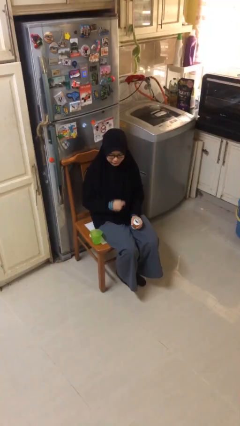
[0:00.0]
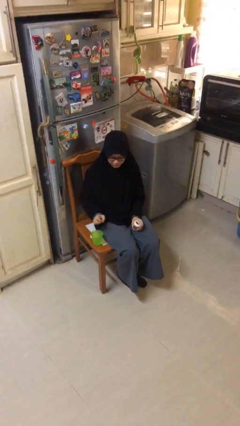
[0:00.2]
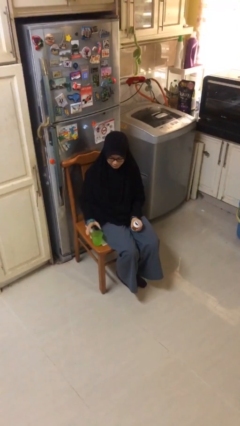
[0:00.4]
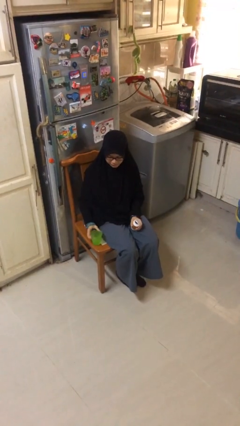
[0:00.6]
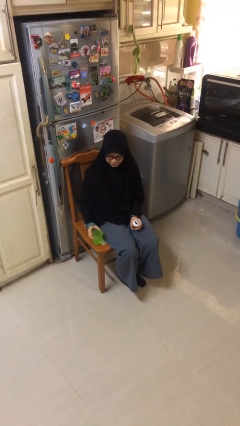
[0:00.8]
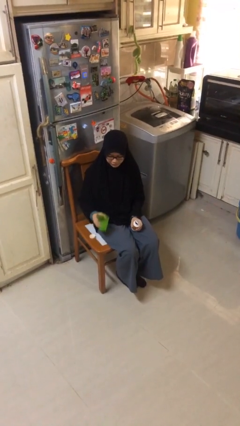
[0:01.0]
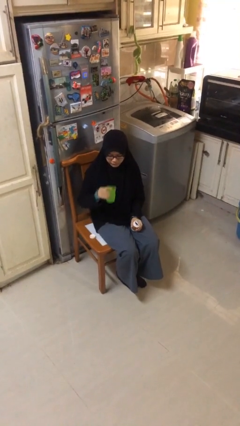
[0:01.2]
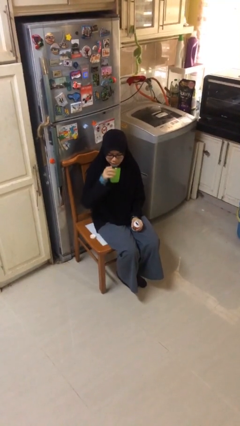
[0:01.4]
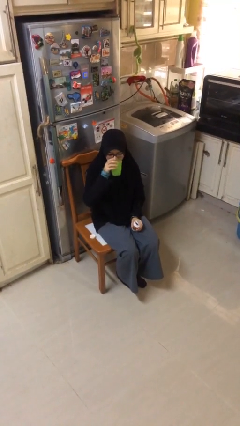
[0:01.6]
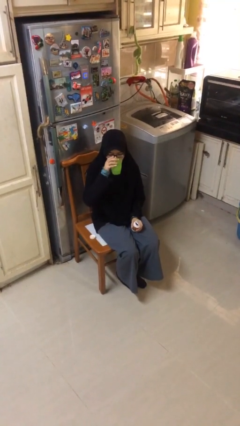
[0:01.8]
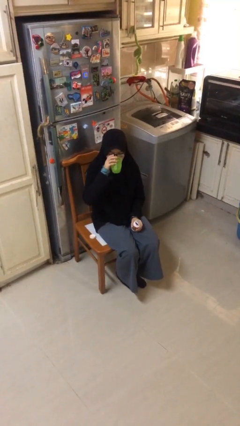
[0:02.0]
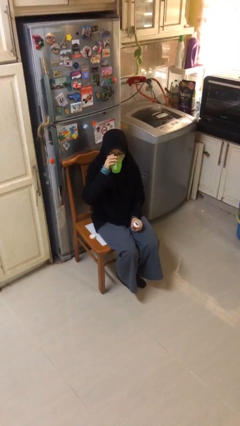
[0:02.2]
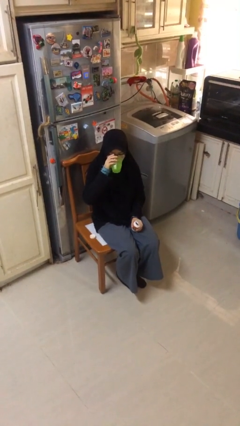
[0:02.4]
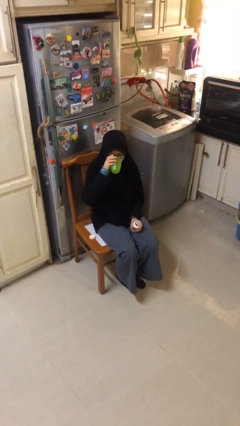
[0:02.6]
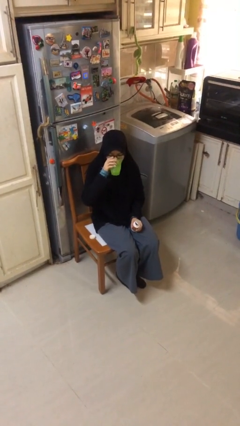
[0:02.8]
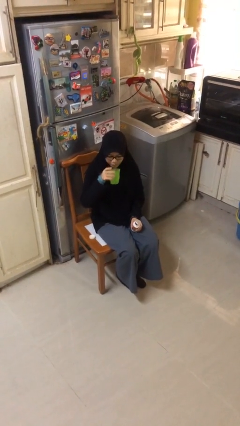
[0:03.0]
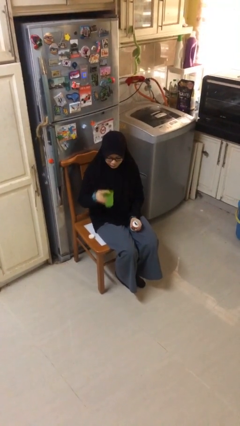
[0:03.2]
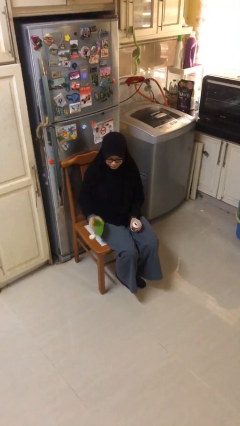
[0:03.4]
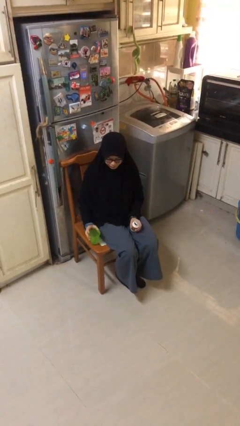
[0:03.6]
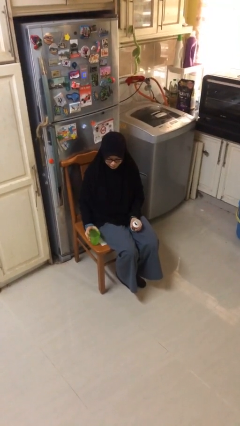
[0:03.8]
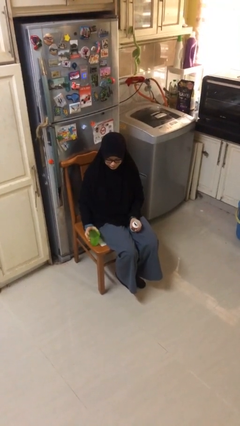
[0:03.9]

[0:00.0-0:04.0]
person drinks from cup

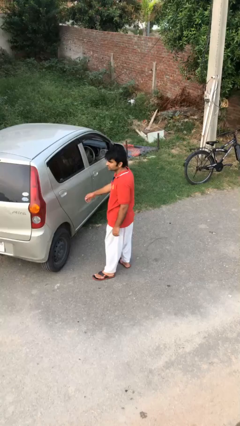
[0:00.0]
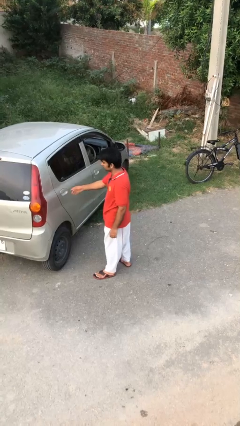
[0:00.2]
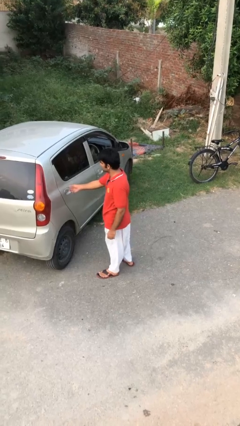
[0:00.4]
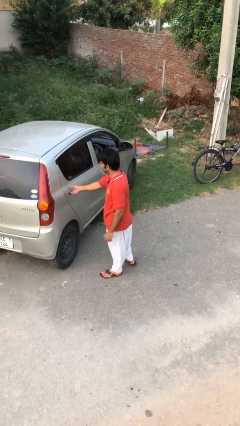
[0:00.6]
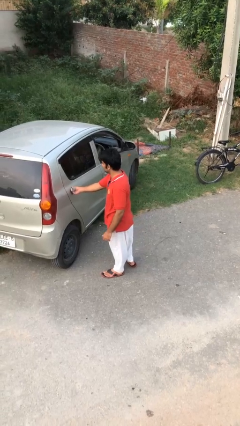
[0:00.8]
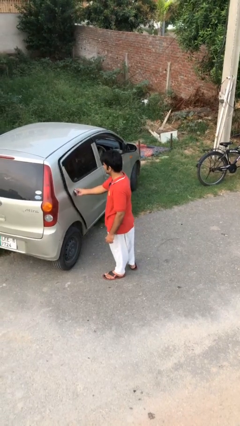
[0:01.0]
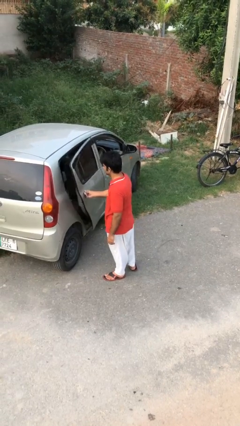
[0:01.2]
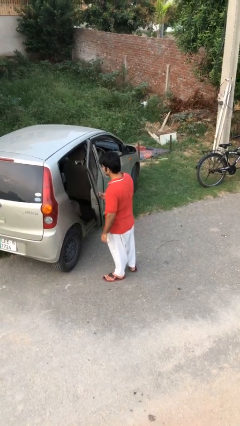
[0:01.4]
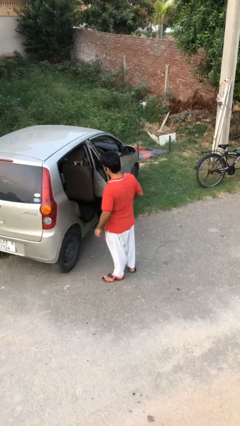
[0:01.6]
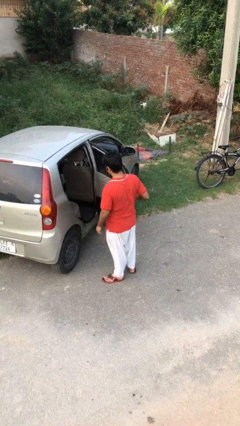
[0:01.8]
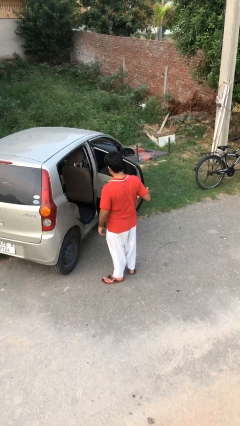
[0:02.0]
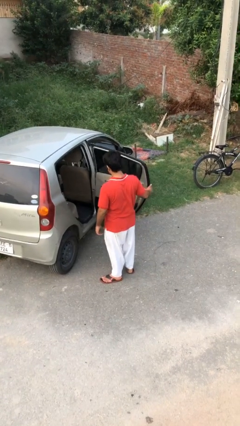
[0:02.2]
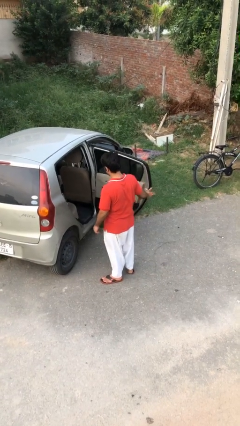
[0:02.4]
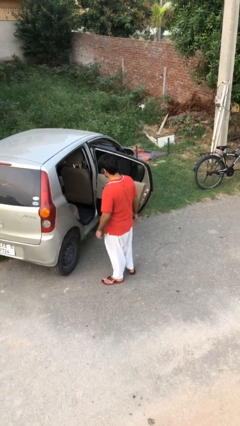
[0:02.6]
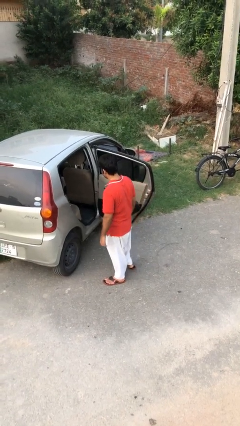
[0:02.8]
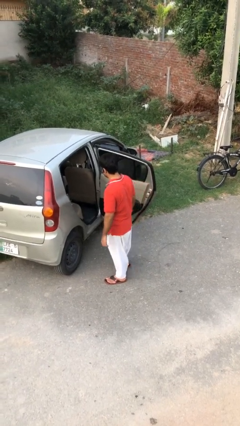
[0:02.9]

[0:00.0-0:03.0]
person opens car door

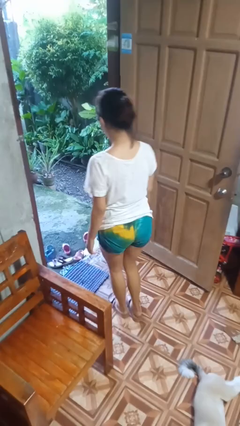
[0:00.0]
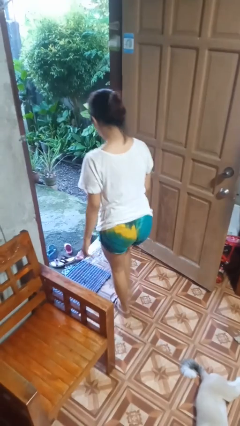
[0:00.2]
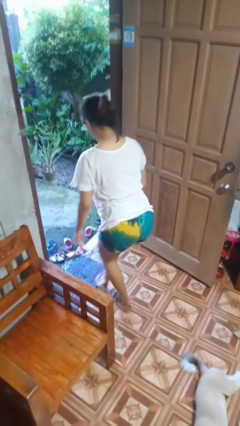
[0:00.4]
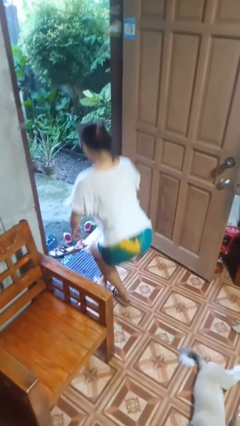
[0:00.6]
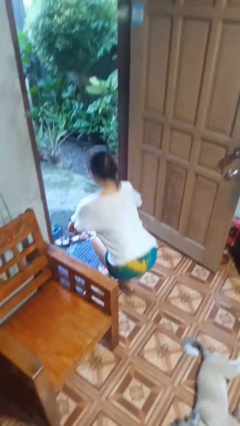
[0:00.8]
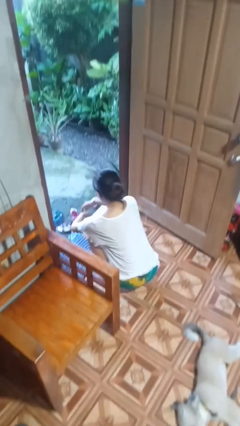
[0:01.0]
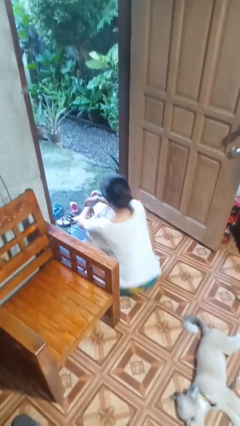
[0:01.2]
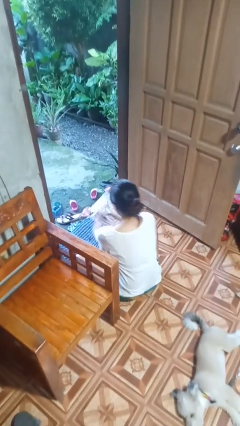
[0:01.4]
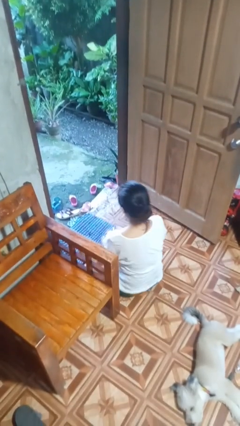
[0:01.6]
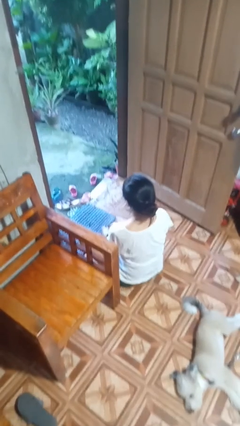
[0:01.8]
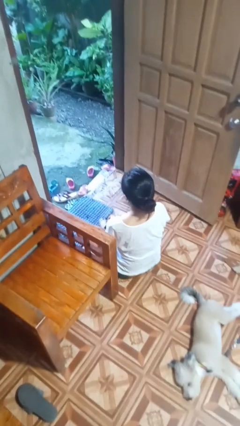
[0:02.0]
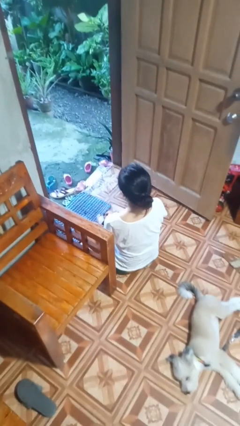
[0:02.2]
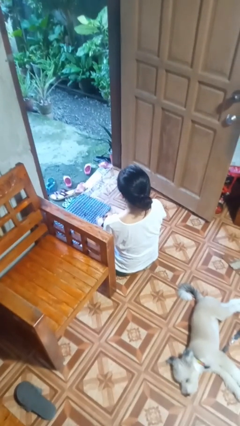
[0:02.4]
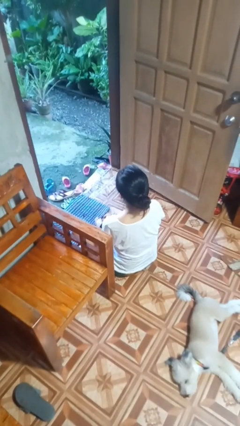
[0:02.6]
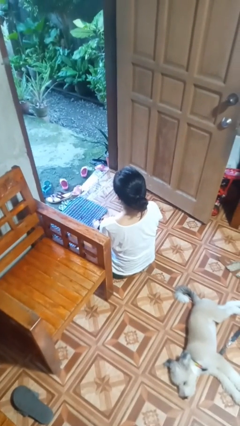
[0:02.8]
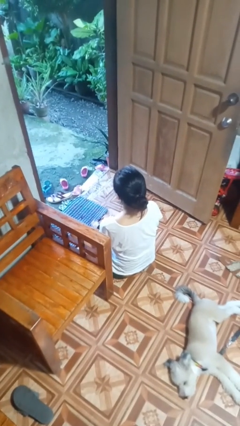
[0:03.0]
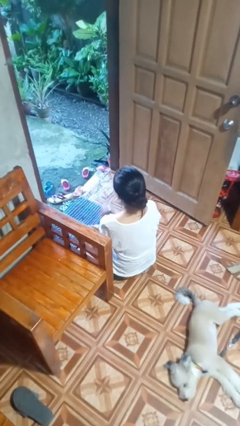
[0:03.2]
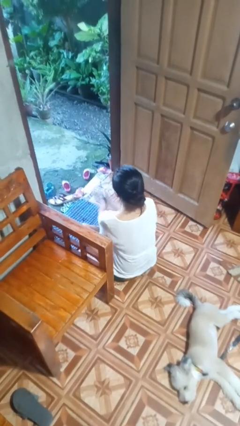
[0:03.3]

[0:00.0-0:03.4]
person sits crisscross

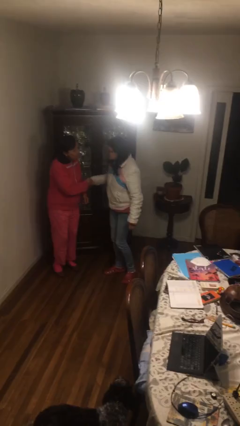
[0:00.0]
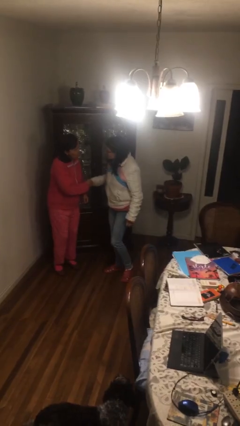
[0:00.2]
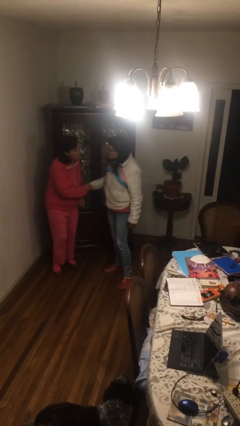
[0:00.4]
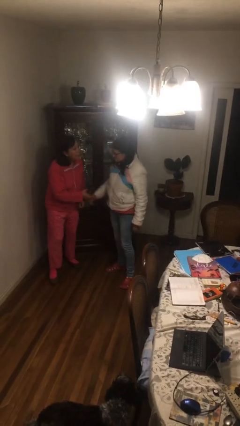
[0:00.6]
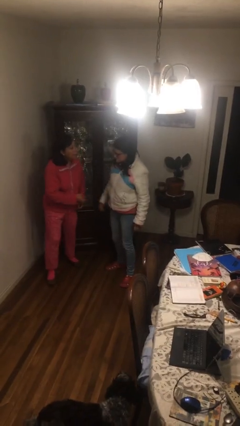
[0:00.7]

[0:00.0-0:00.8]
person shakes hand

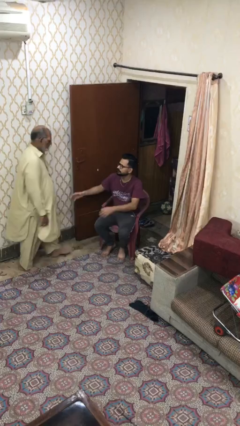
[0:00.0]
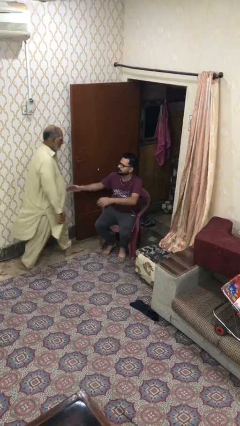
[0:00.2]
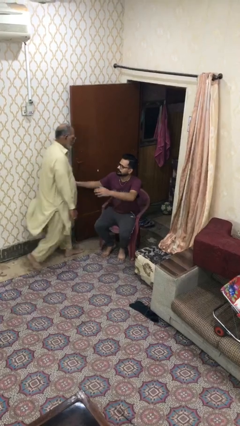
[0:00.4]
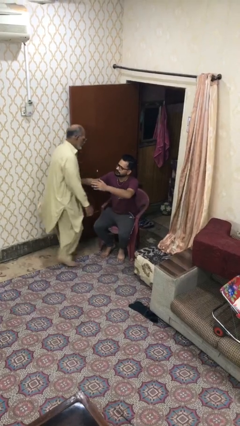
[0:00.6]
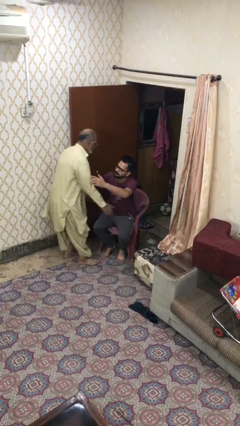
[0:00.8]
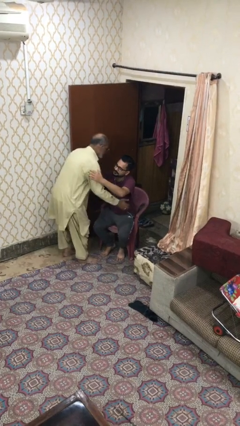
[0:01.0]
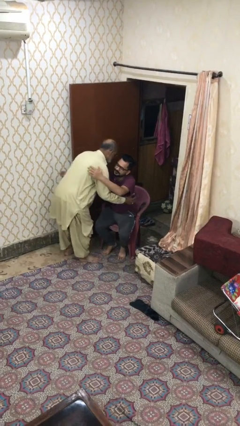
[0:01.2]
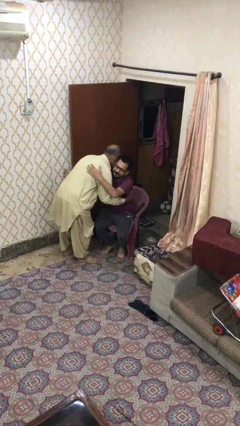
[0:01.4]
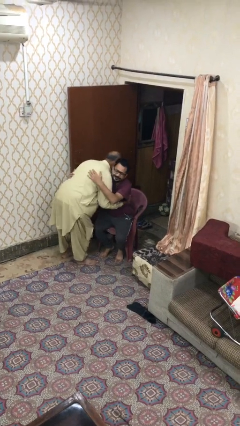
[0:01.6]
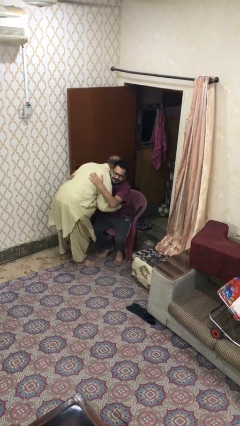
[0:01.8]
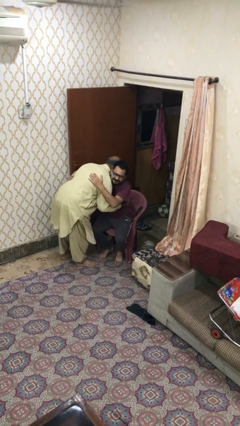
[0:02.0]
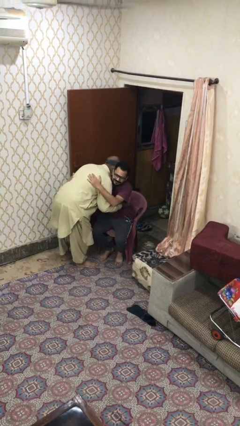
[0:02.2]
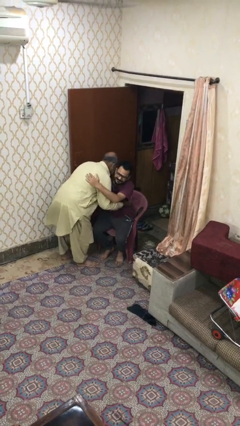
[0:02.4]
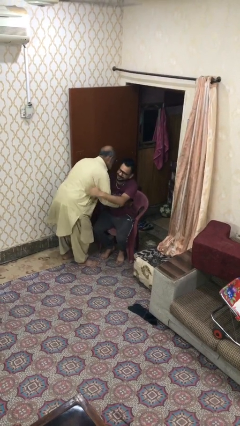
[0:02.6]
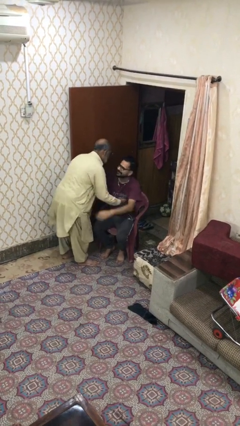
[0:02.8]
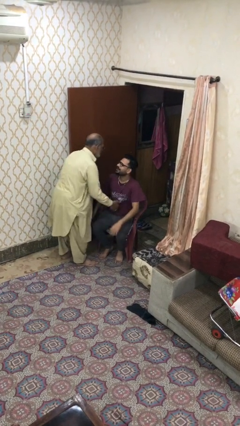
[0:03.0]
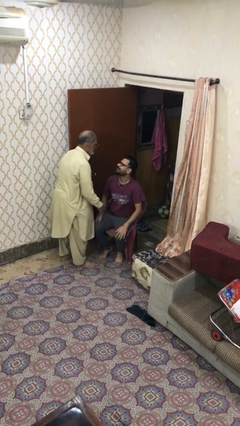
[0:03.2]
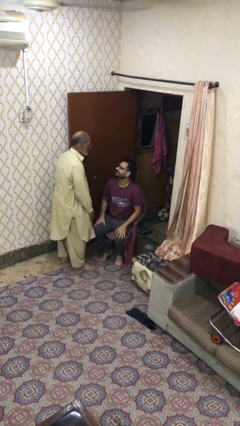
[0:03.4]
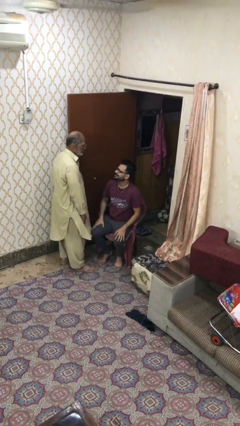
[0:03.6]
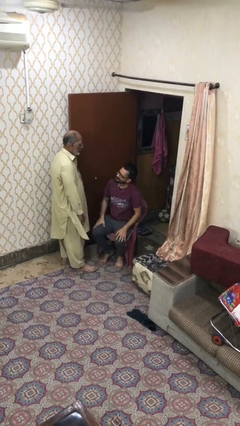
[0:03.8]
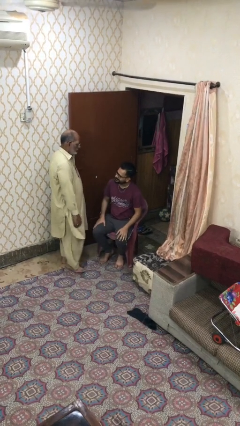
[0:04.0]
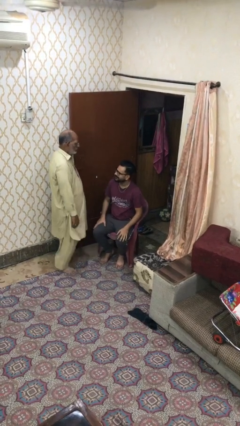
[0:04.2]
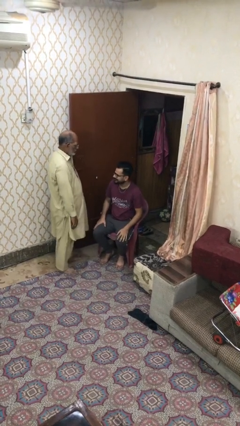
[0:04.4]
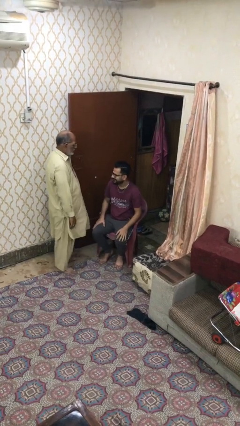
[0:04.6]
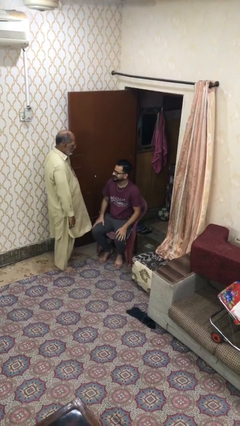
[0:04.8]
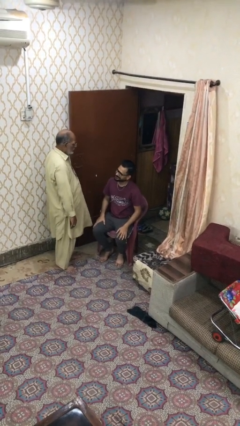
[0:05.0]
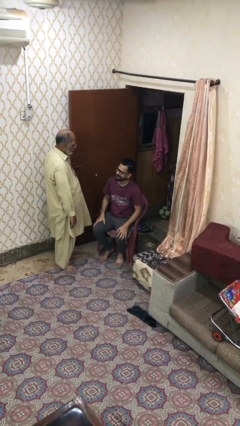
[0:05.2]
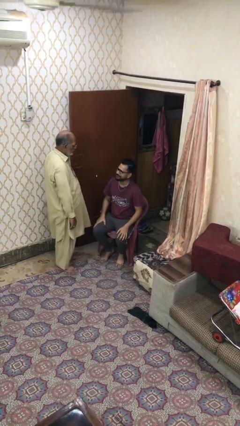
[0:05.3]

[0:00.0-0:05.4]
person embraces person

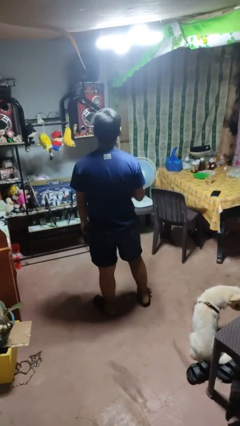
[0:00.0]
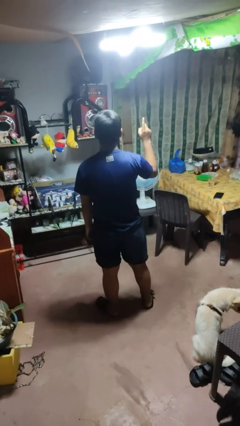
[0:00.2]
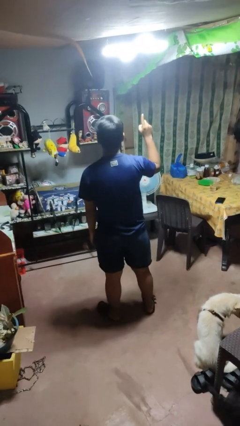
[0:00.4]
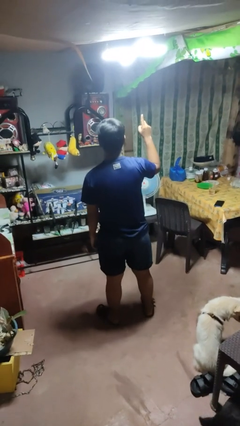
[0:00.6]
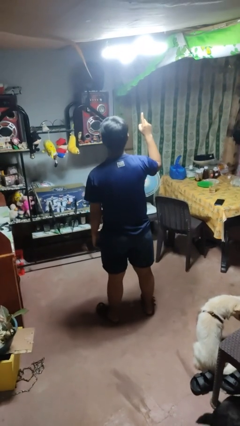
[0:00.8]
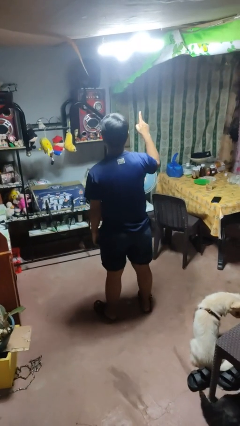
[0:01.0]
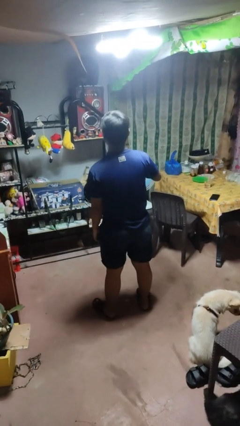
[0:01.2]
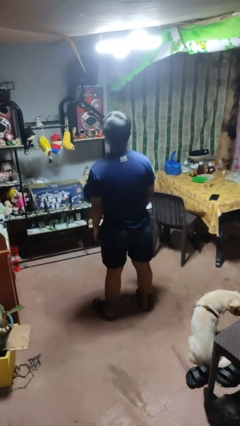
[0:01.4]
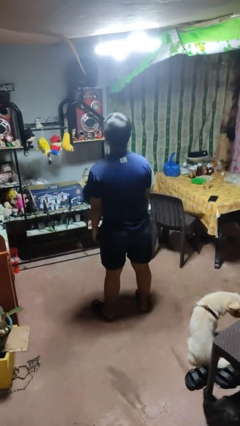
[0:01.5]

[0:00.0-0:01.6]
person gestures number one
